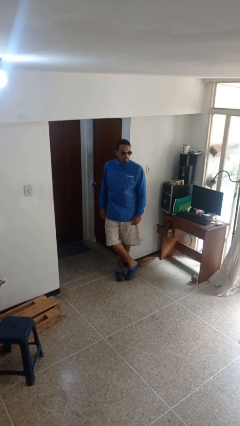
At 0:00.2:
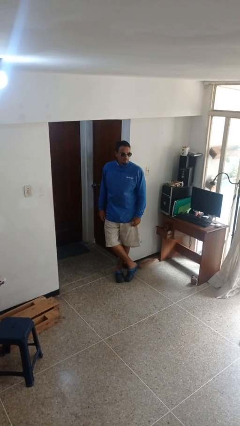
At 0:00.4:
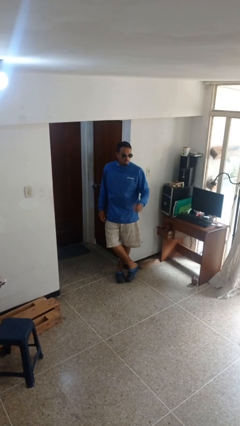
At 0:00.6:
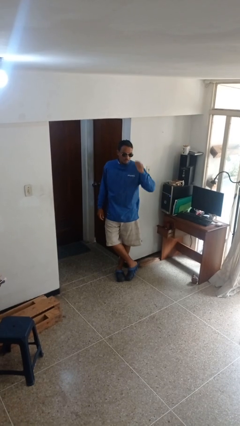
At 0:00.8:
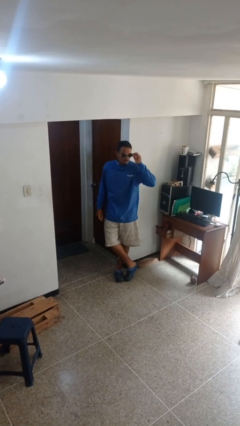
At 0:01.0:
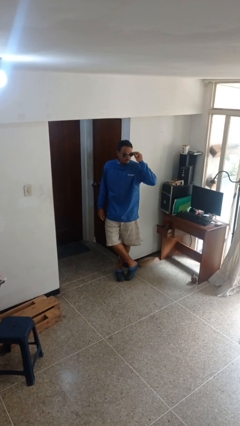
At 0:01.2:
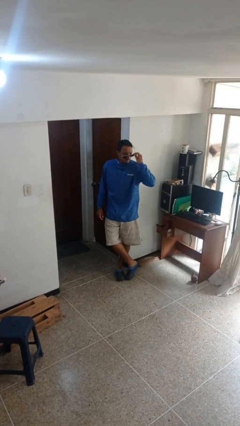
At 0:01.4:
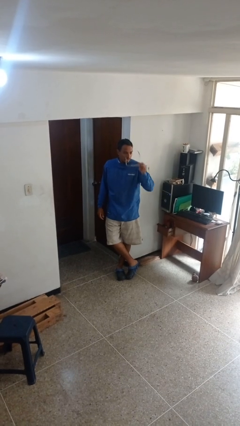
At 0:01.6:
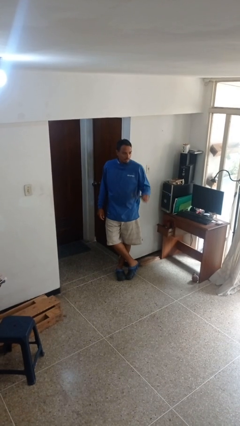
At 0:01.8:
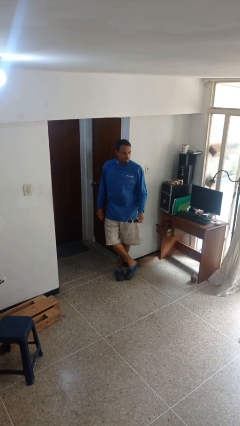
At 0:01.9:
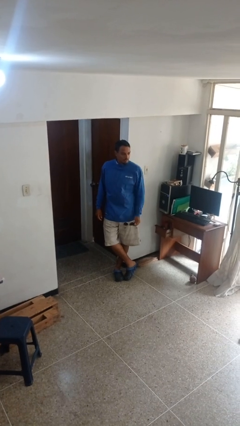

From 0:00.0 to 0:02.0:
person takes off sunglasses

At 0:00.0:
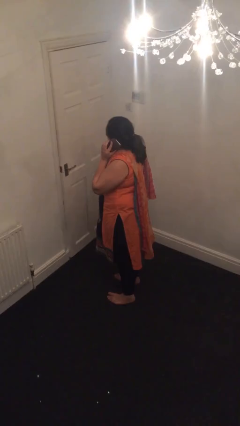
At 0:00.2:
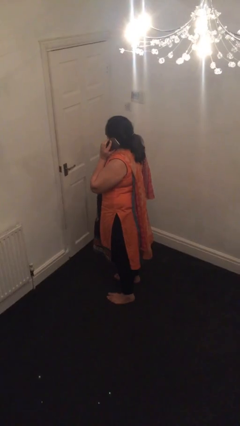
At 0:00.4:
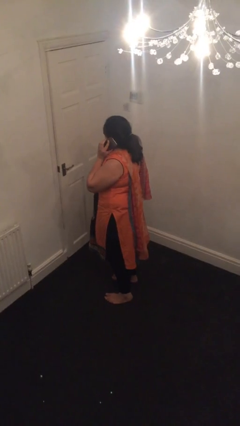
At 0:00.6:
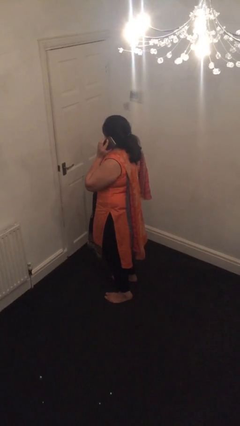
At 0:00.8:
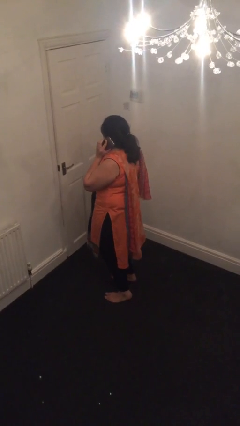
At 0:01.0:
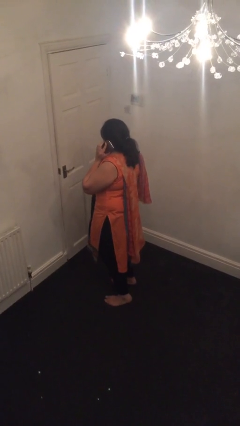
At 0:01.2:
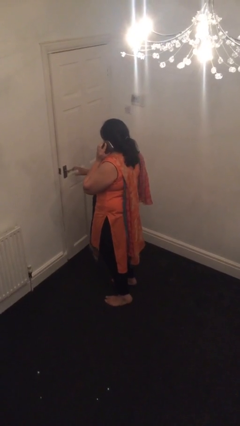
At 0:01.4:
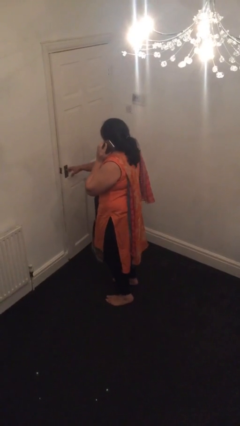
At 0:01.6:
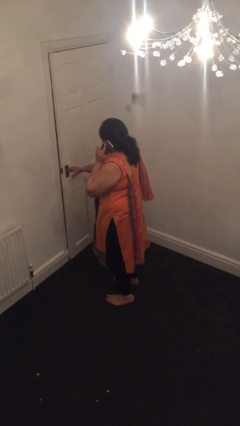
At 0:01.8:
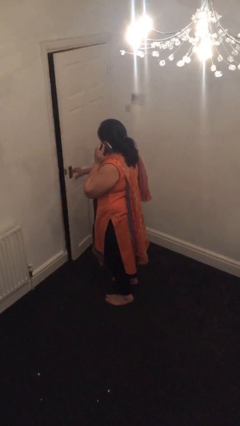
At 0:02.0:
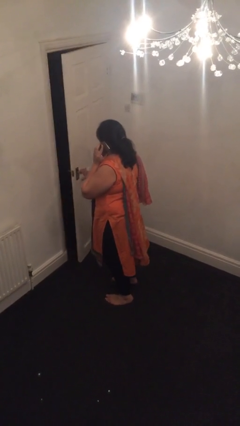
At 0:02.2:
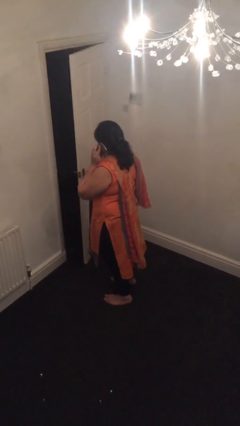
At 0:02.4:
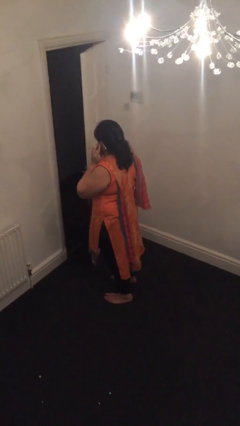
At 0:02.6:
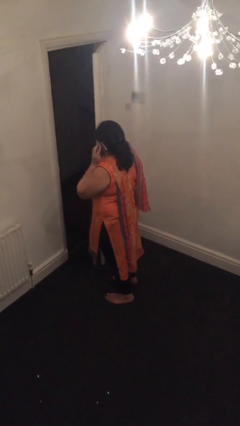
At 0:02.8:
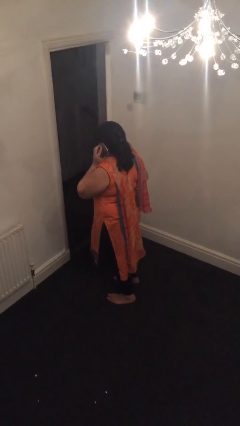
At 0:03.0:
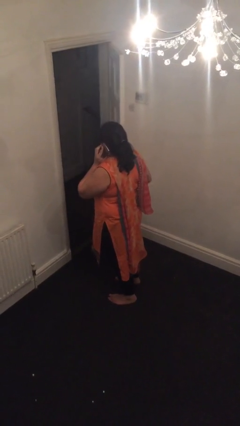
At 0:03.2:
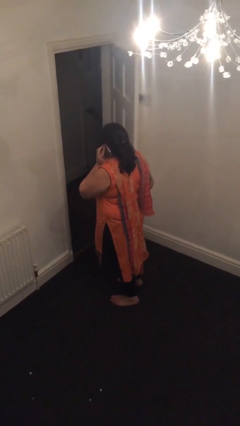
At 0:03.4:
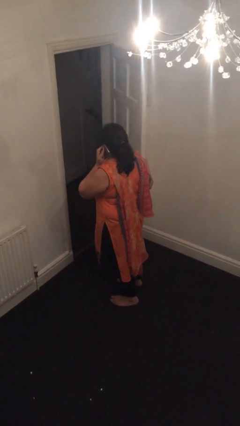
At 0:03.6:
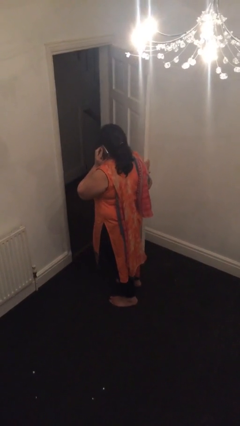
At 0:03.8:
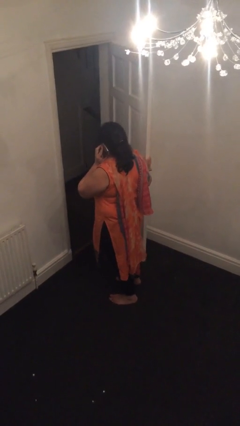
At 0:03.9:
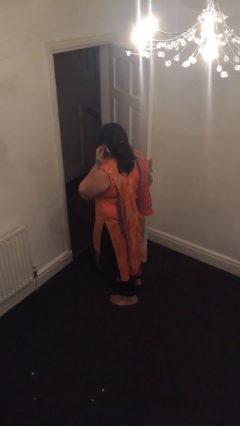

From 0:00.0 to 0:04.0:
person opens facility door

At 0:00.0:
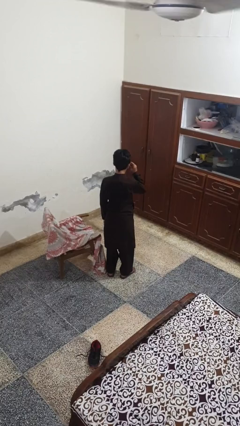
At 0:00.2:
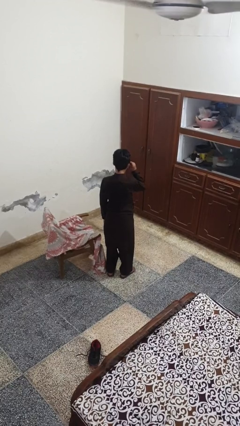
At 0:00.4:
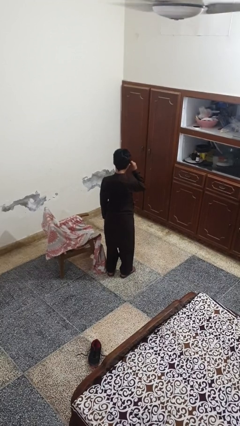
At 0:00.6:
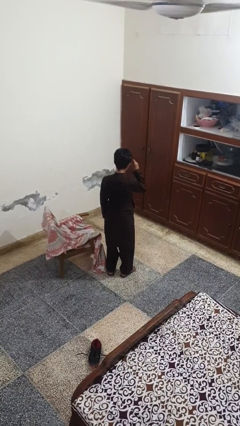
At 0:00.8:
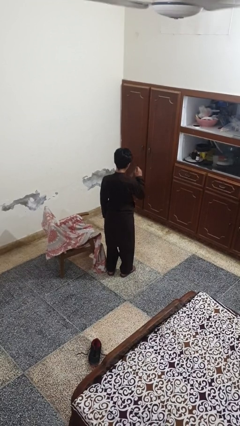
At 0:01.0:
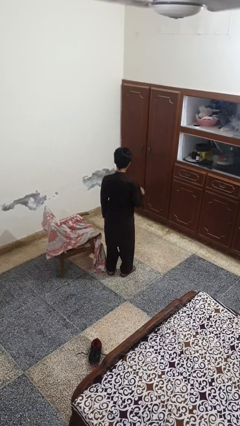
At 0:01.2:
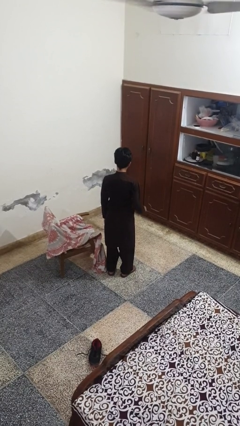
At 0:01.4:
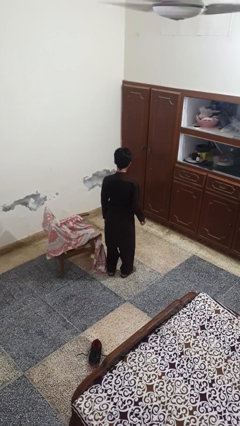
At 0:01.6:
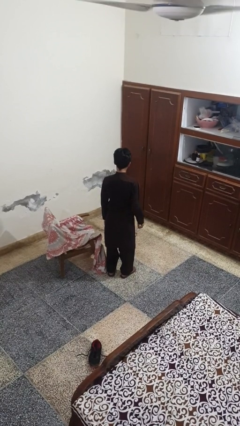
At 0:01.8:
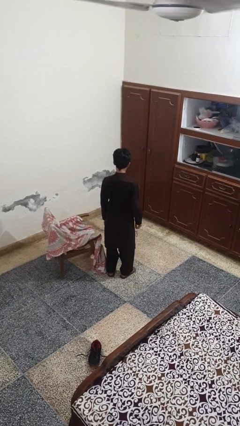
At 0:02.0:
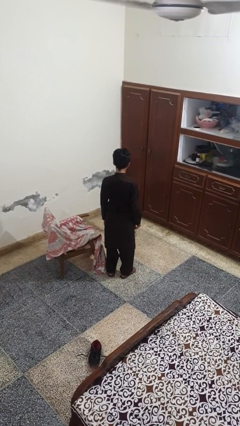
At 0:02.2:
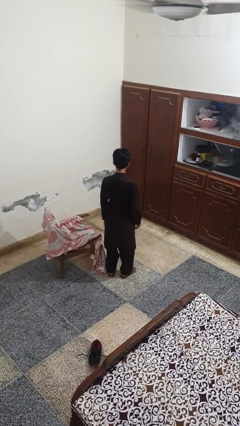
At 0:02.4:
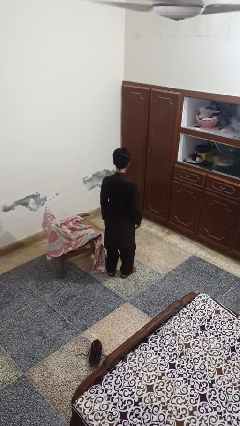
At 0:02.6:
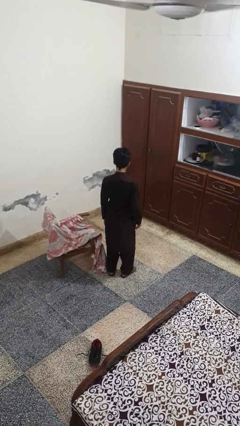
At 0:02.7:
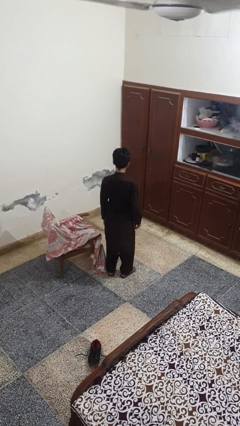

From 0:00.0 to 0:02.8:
person takes off glasses

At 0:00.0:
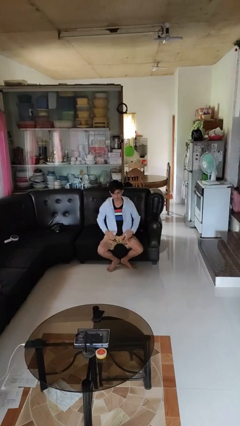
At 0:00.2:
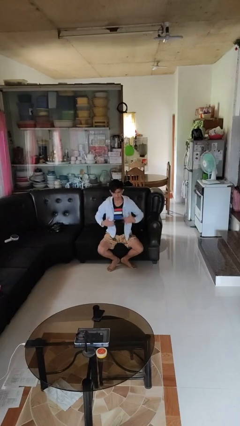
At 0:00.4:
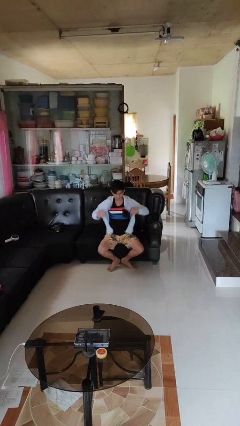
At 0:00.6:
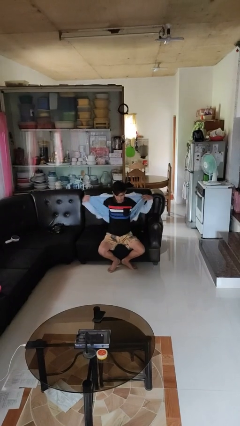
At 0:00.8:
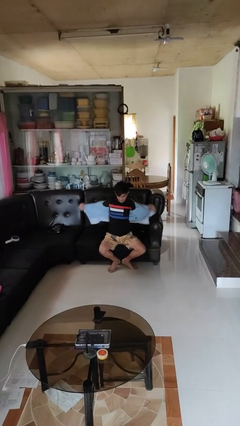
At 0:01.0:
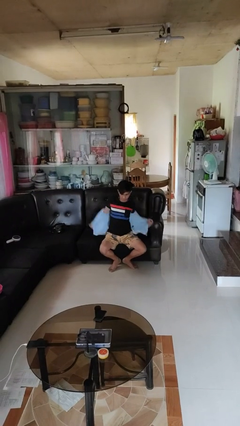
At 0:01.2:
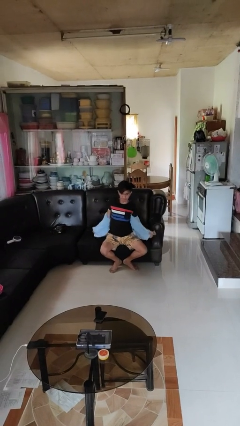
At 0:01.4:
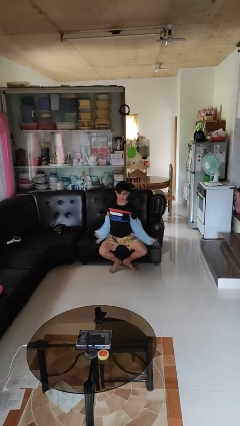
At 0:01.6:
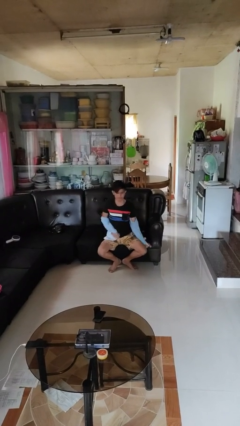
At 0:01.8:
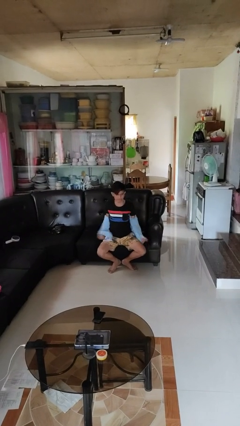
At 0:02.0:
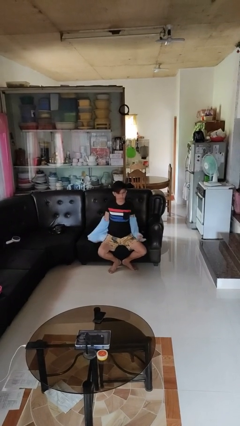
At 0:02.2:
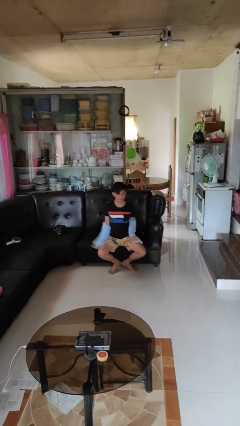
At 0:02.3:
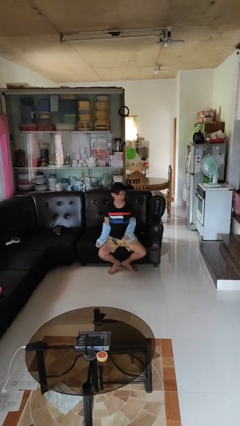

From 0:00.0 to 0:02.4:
person takes off jacket

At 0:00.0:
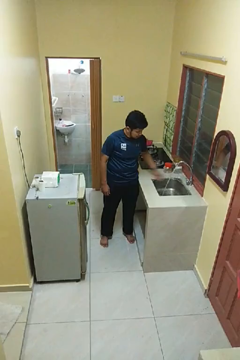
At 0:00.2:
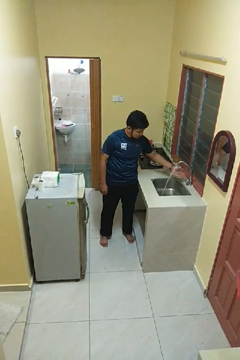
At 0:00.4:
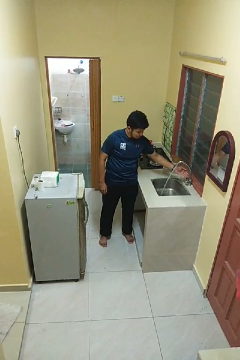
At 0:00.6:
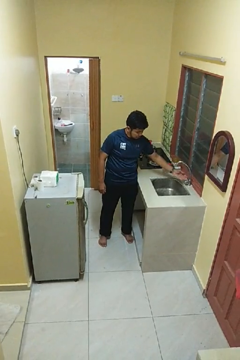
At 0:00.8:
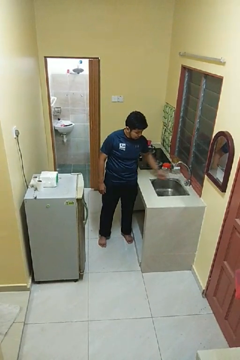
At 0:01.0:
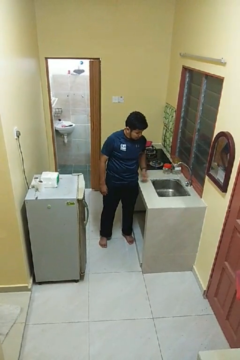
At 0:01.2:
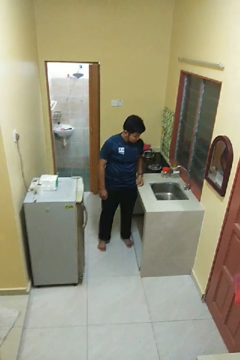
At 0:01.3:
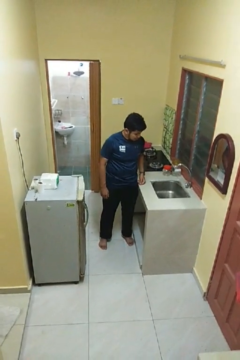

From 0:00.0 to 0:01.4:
person turns off faucet

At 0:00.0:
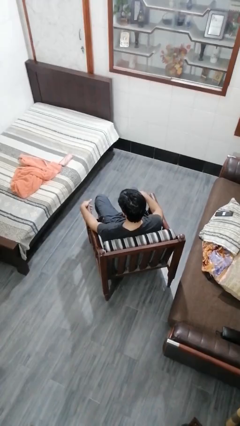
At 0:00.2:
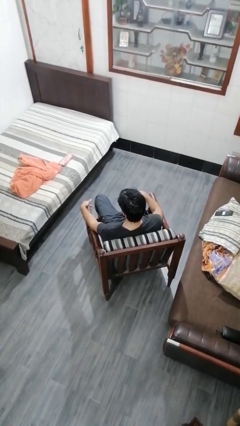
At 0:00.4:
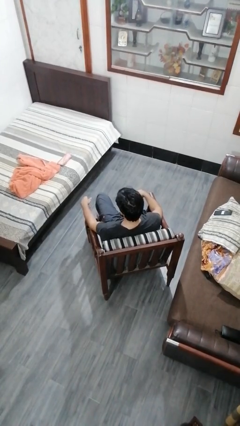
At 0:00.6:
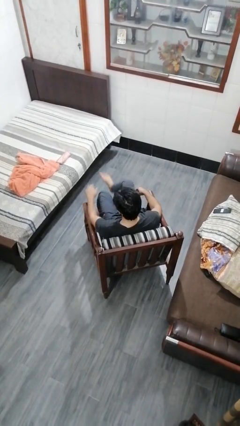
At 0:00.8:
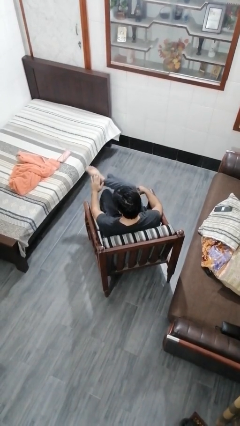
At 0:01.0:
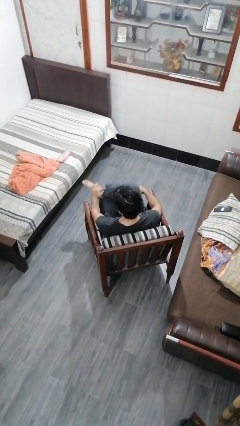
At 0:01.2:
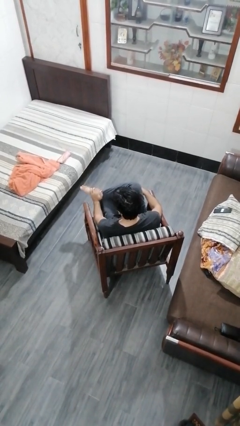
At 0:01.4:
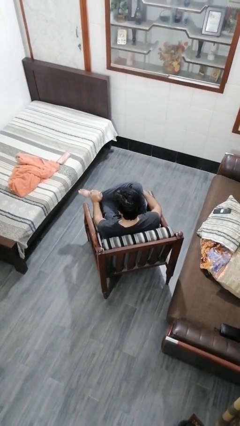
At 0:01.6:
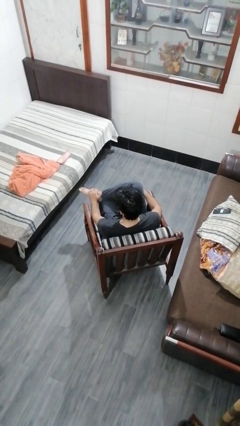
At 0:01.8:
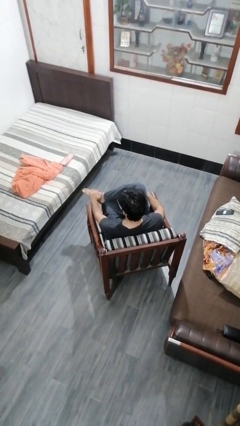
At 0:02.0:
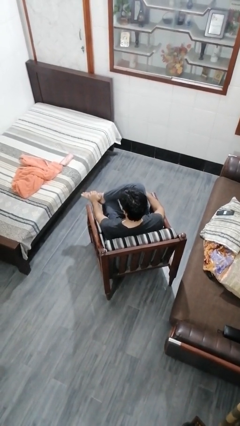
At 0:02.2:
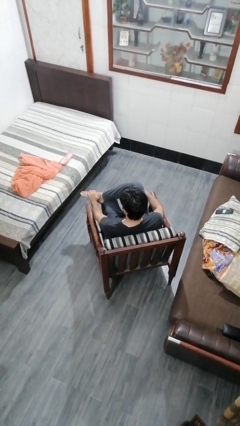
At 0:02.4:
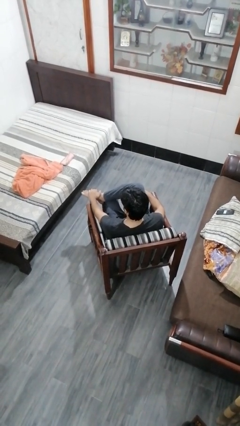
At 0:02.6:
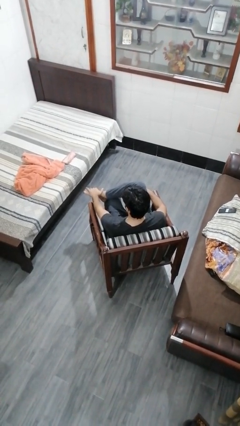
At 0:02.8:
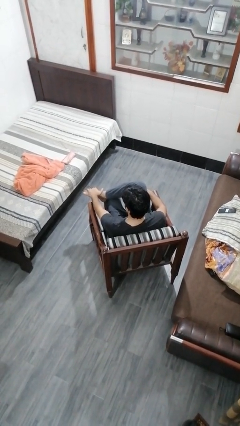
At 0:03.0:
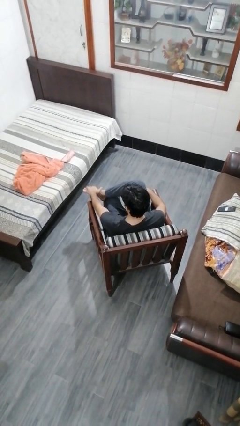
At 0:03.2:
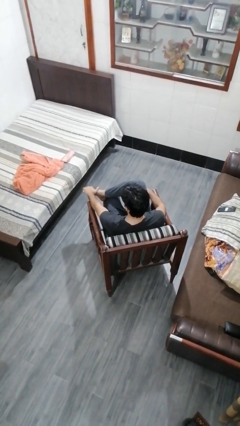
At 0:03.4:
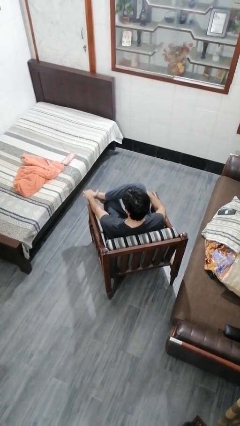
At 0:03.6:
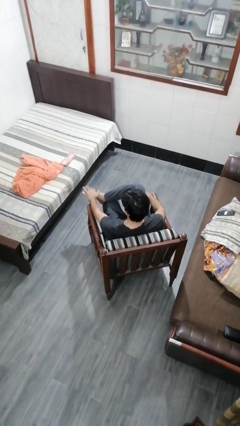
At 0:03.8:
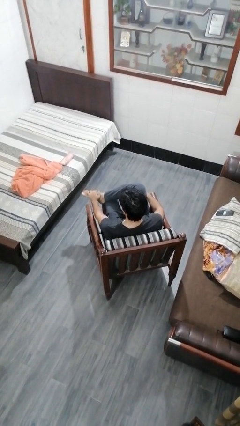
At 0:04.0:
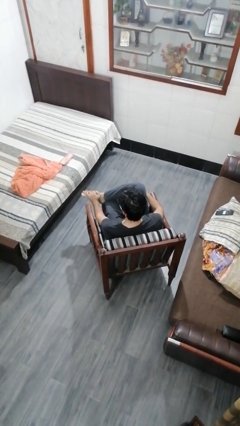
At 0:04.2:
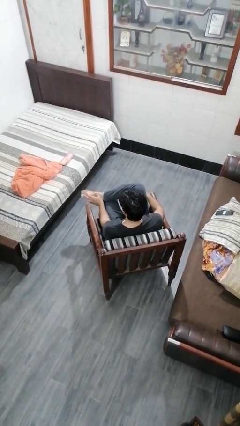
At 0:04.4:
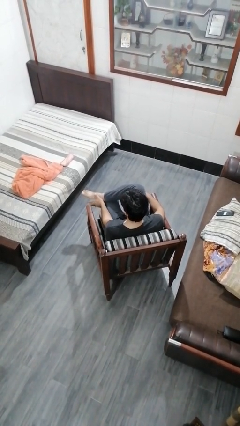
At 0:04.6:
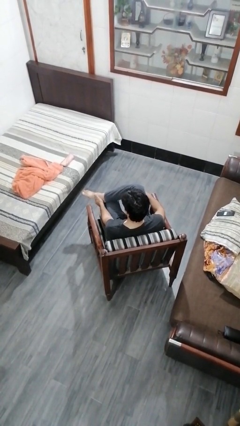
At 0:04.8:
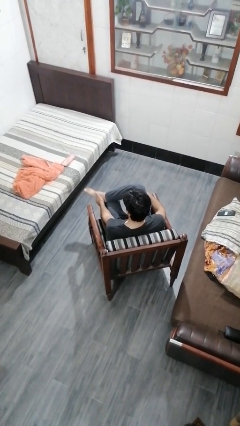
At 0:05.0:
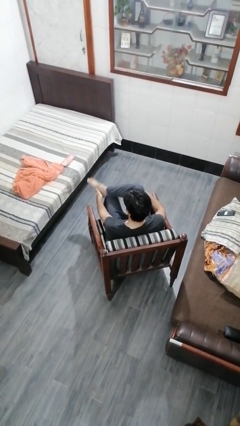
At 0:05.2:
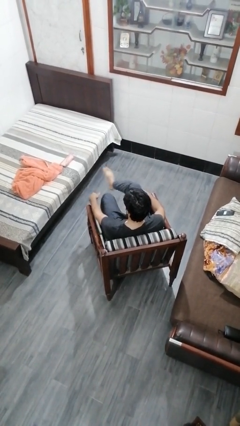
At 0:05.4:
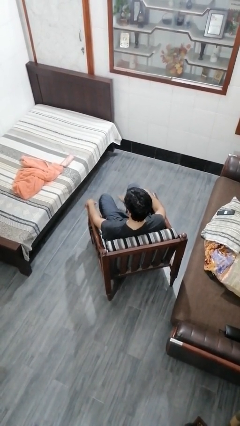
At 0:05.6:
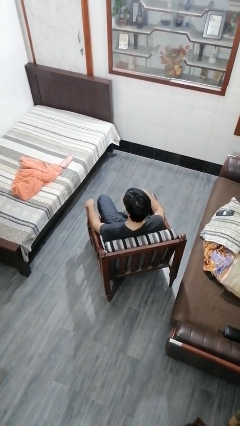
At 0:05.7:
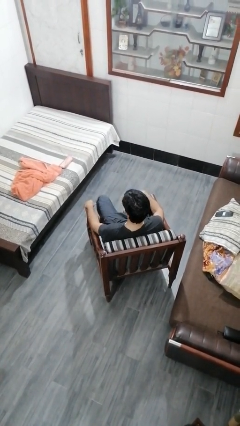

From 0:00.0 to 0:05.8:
person rubs foot
